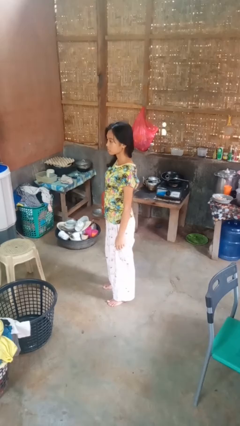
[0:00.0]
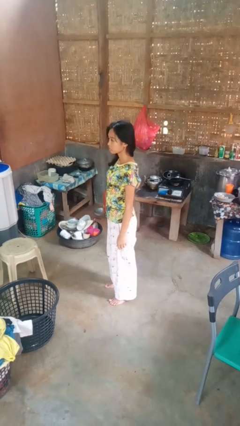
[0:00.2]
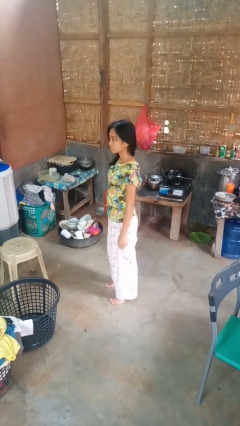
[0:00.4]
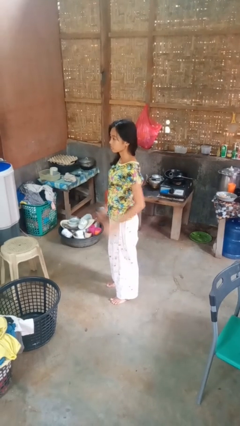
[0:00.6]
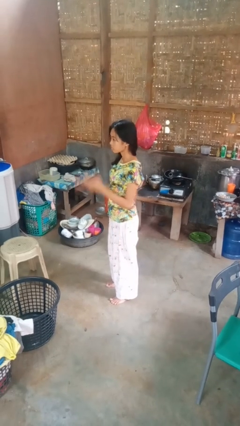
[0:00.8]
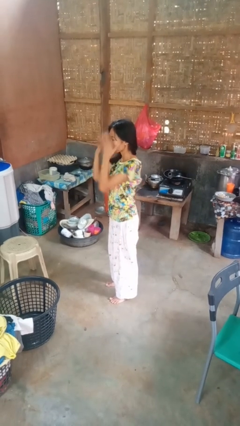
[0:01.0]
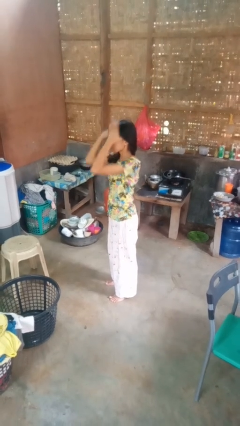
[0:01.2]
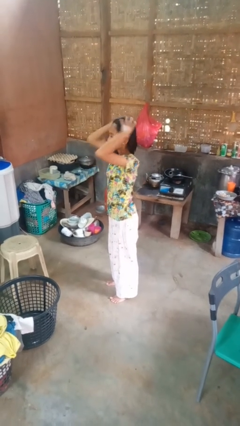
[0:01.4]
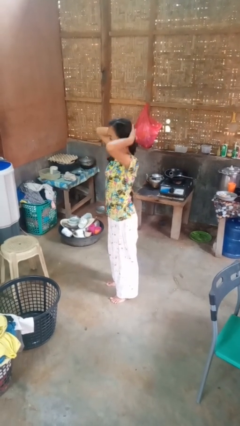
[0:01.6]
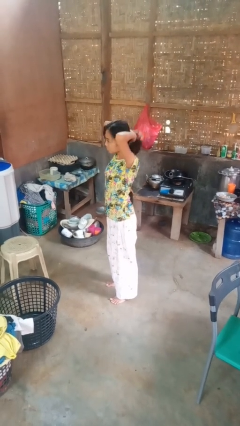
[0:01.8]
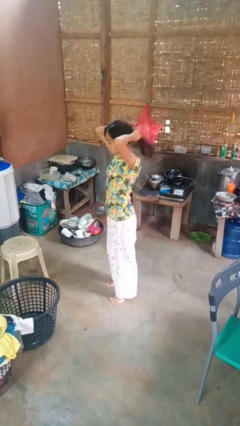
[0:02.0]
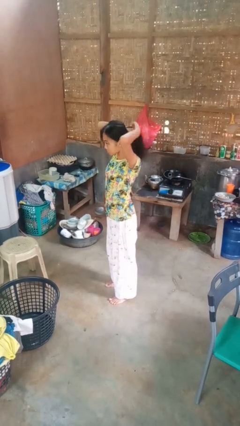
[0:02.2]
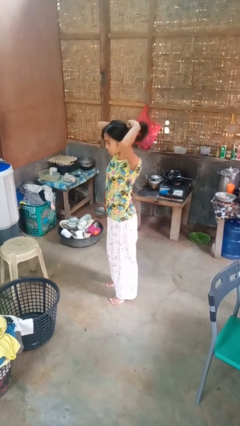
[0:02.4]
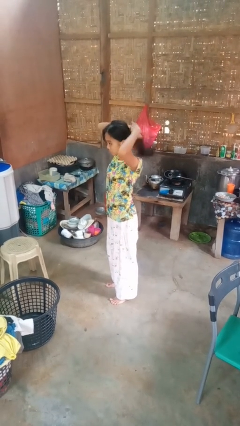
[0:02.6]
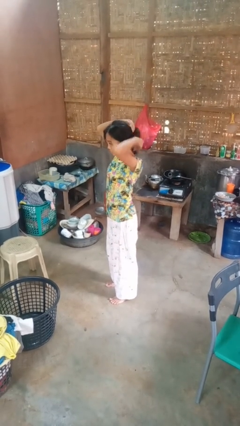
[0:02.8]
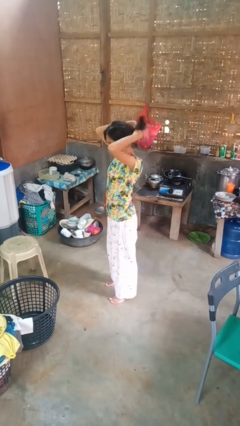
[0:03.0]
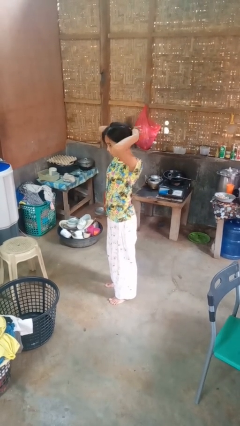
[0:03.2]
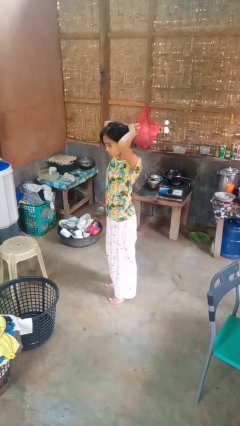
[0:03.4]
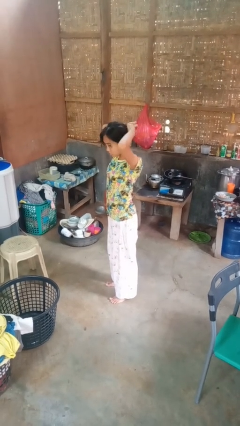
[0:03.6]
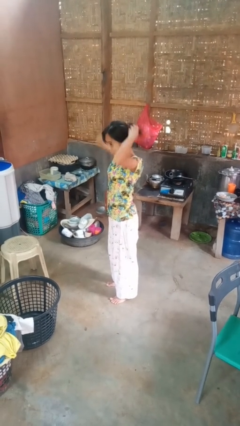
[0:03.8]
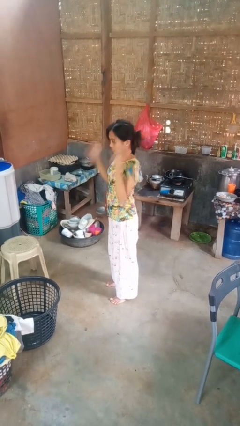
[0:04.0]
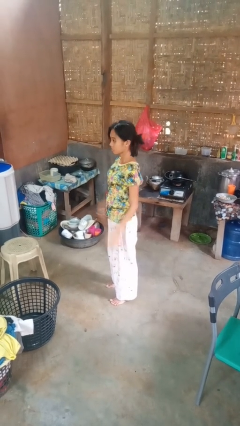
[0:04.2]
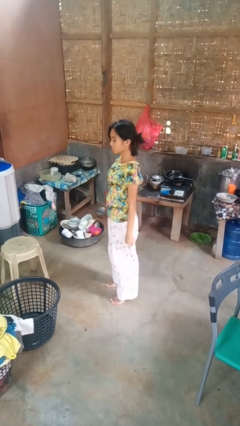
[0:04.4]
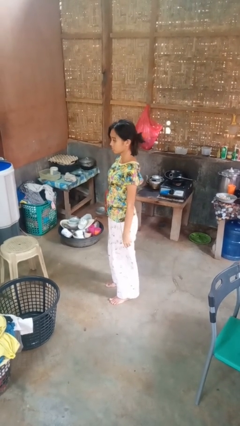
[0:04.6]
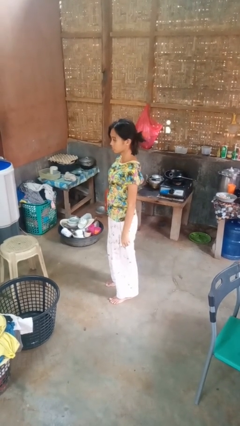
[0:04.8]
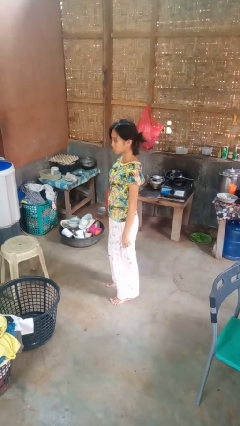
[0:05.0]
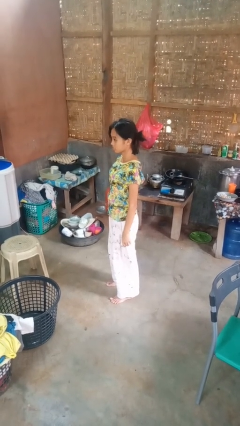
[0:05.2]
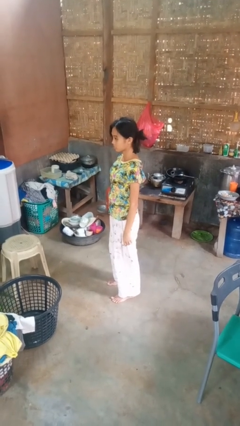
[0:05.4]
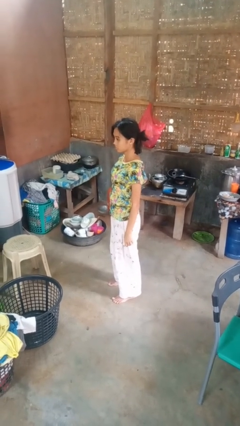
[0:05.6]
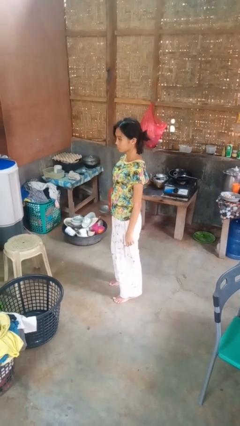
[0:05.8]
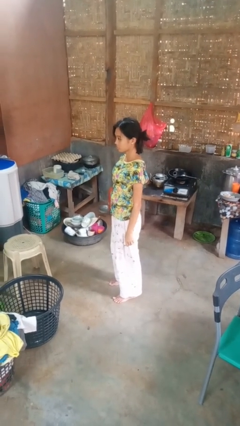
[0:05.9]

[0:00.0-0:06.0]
person puts hair in ponytail

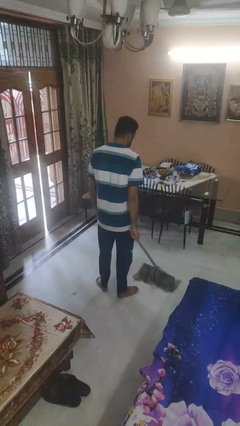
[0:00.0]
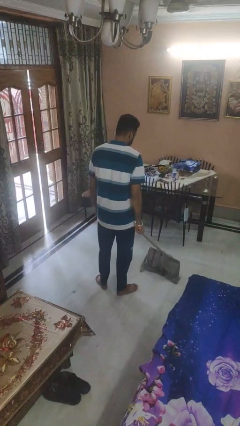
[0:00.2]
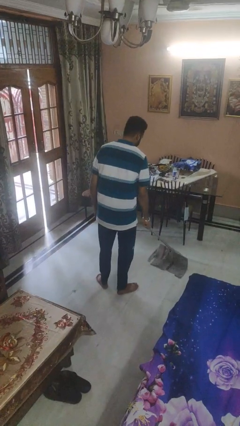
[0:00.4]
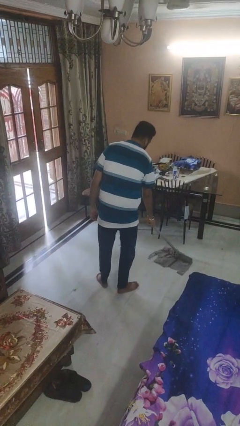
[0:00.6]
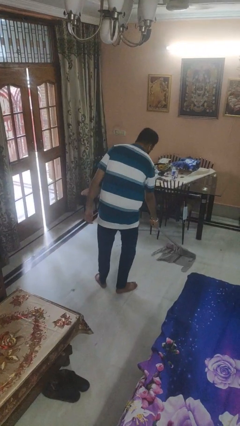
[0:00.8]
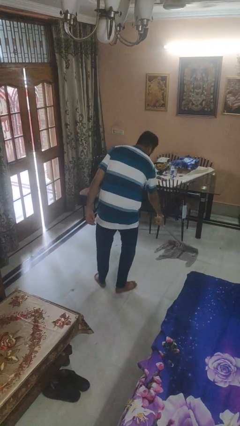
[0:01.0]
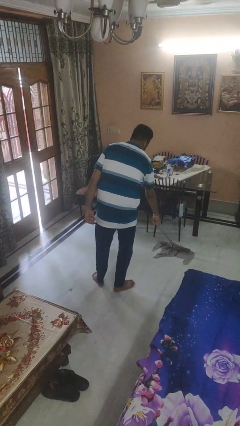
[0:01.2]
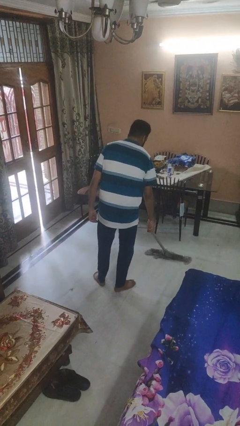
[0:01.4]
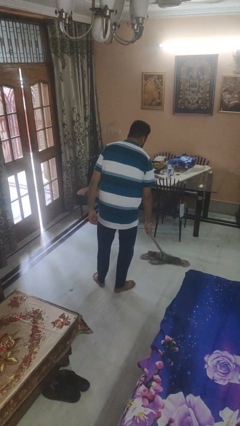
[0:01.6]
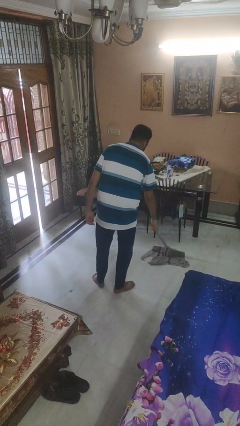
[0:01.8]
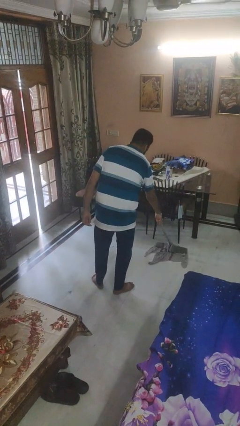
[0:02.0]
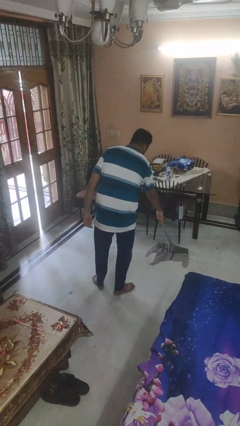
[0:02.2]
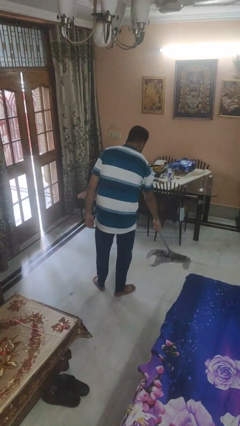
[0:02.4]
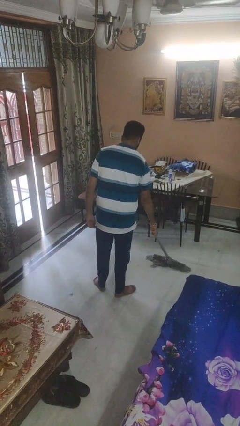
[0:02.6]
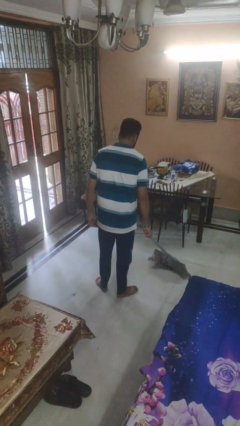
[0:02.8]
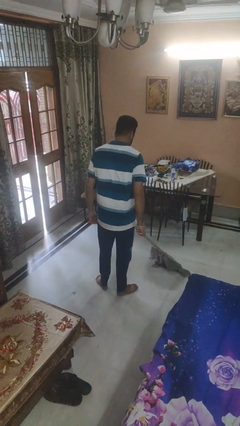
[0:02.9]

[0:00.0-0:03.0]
person mops

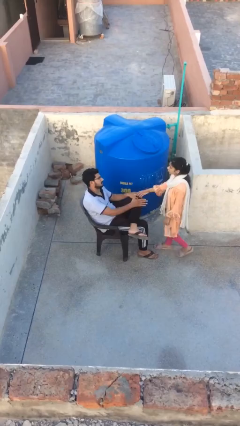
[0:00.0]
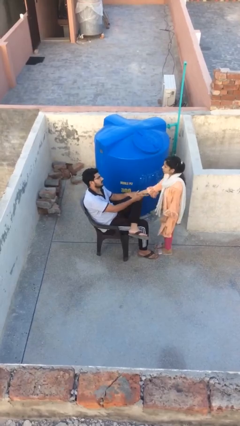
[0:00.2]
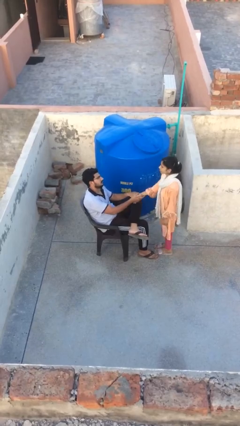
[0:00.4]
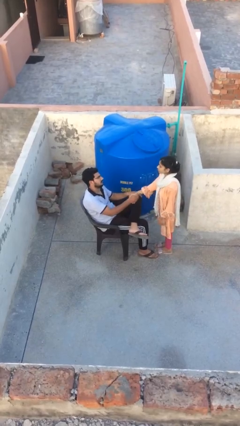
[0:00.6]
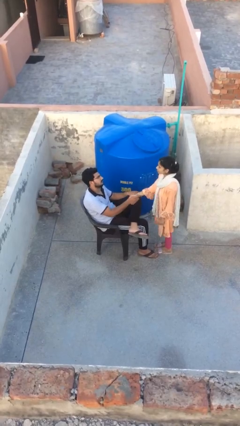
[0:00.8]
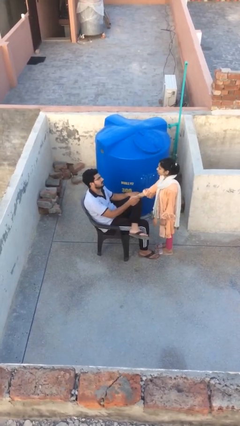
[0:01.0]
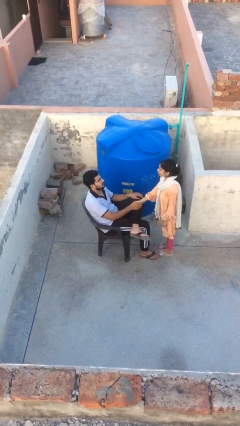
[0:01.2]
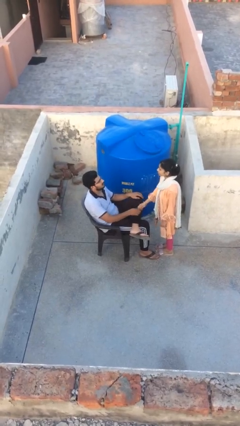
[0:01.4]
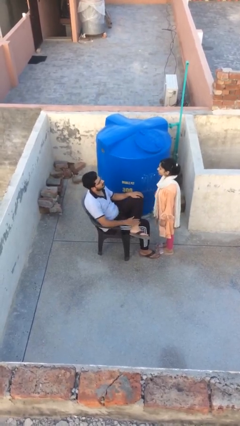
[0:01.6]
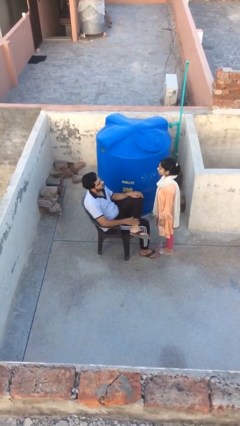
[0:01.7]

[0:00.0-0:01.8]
person shakes hand

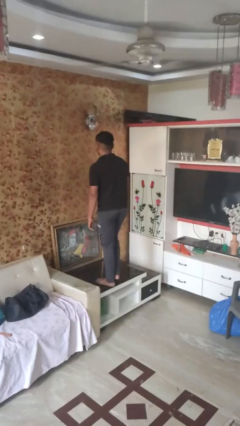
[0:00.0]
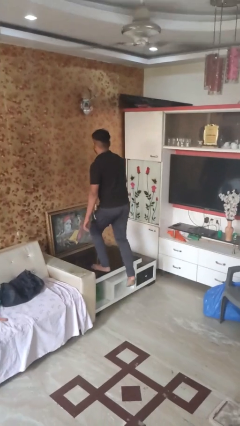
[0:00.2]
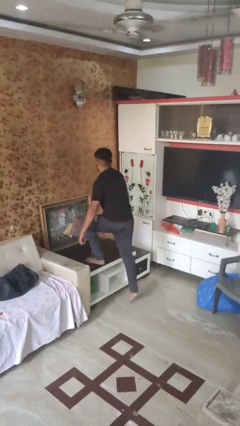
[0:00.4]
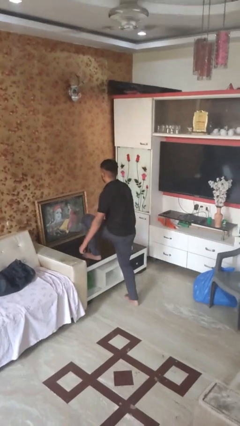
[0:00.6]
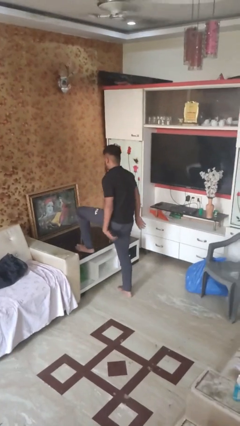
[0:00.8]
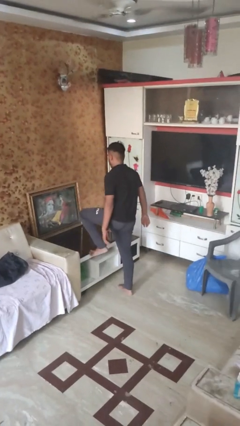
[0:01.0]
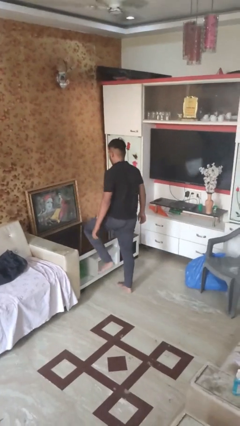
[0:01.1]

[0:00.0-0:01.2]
person climbs off table

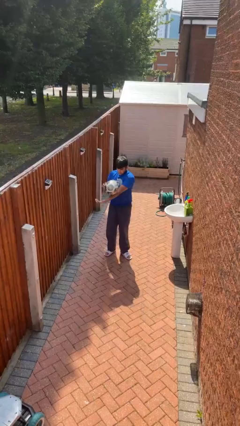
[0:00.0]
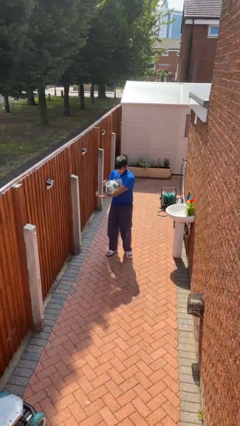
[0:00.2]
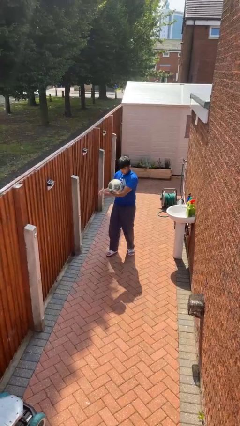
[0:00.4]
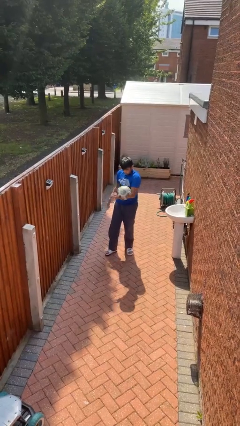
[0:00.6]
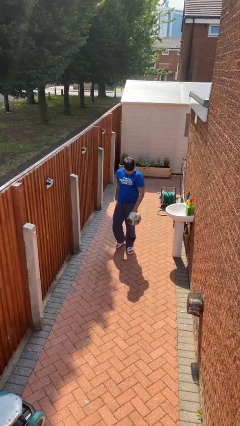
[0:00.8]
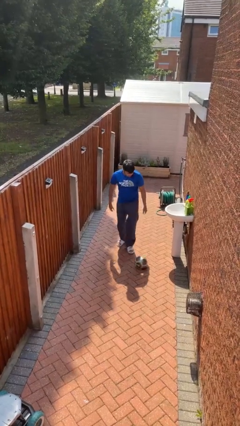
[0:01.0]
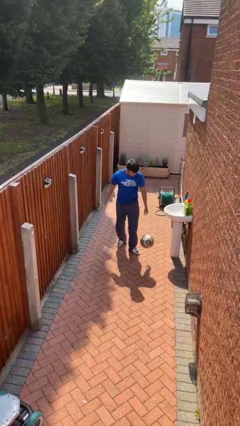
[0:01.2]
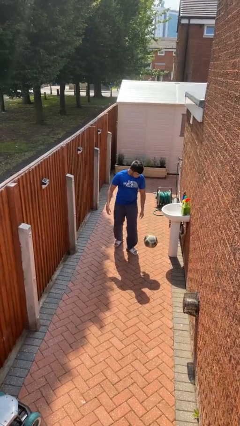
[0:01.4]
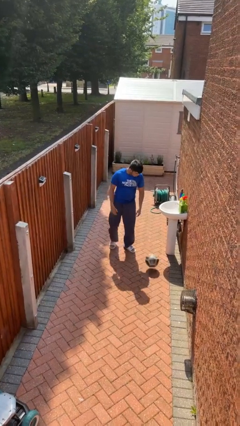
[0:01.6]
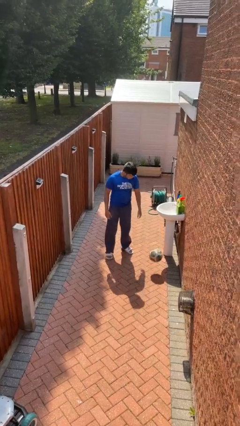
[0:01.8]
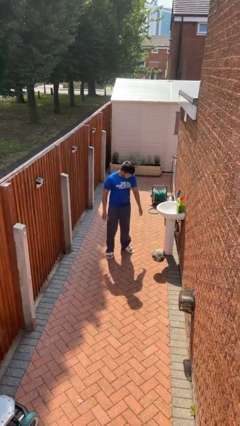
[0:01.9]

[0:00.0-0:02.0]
person drops object

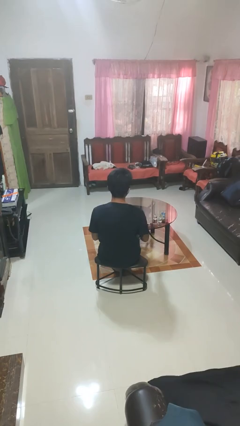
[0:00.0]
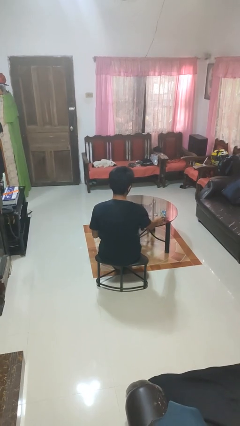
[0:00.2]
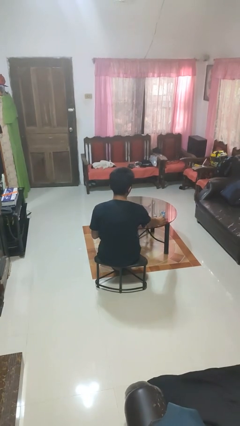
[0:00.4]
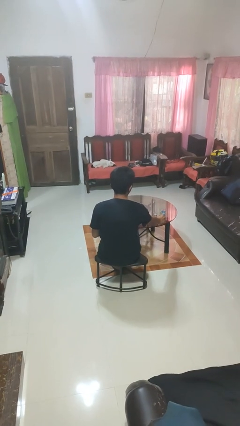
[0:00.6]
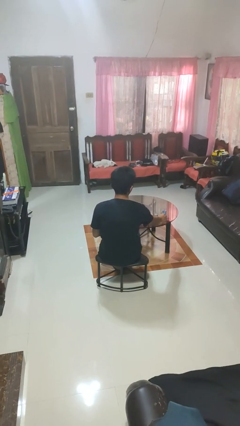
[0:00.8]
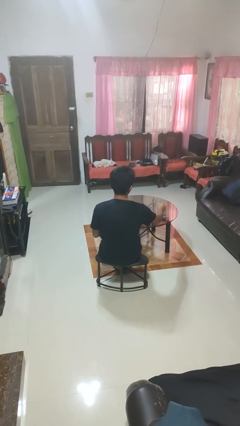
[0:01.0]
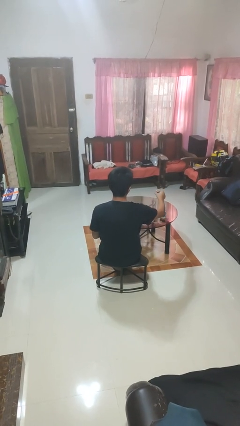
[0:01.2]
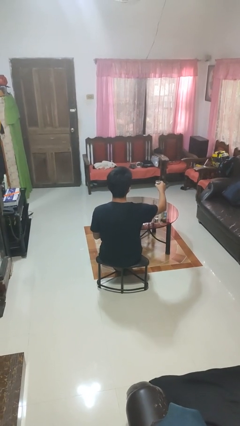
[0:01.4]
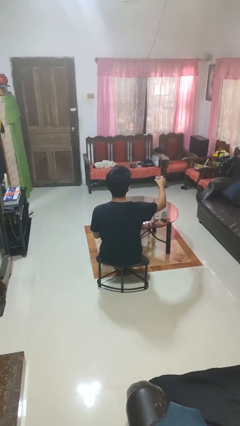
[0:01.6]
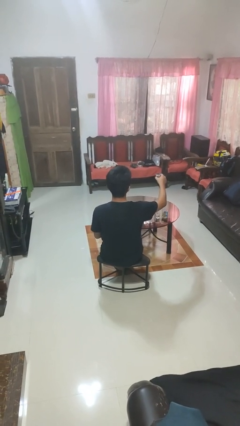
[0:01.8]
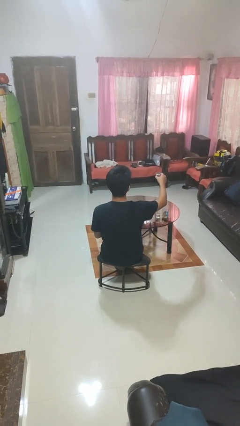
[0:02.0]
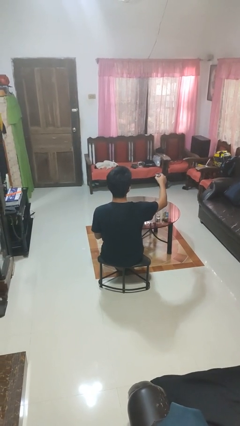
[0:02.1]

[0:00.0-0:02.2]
person picks up object from table

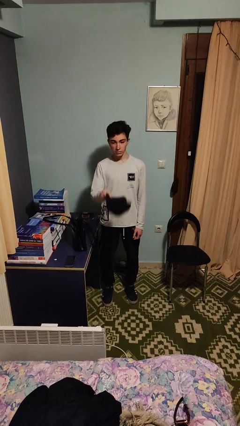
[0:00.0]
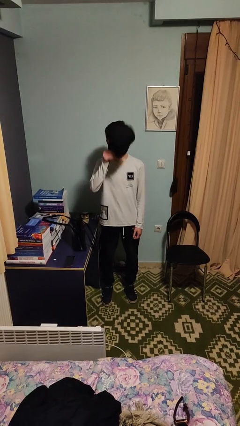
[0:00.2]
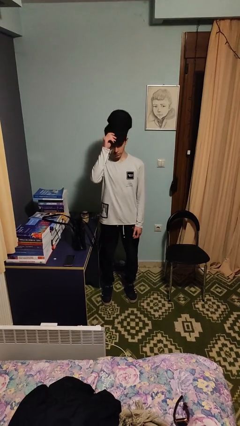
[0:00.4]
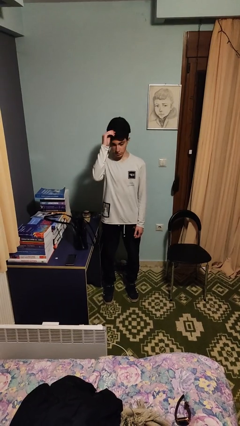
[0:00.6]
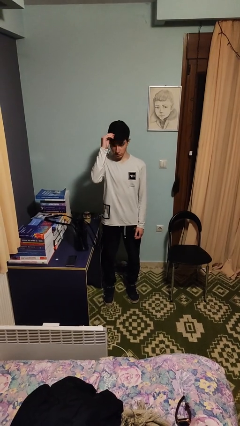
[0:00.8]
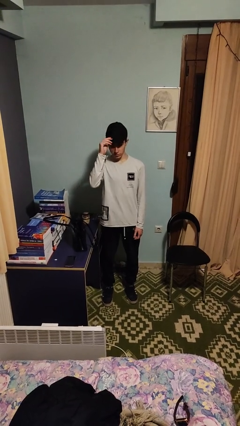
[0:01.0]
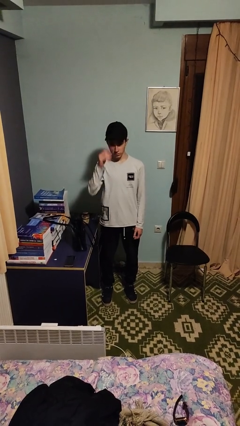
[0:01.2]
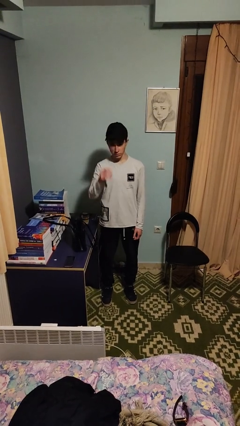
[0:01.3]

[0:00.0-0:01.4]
person puts on hat
